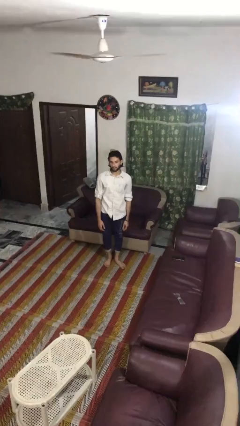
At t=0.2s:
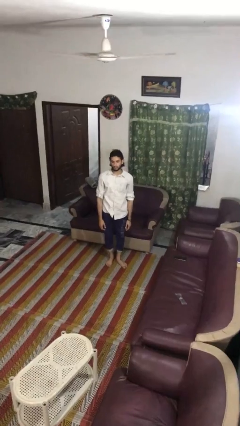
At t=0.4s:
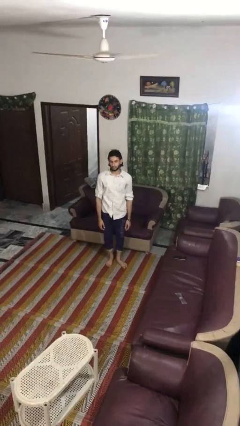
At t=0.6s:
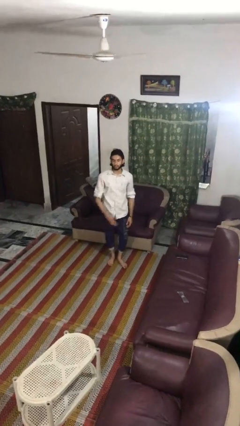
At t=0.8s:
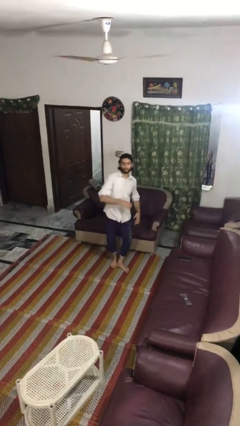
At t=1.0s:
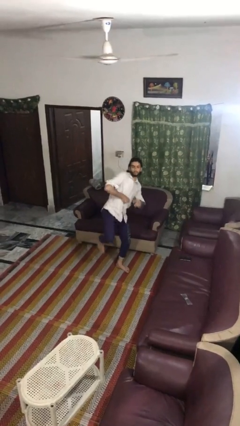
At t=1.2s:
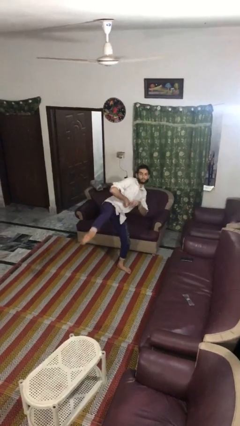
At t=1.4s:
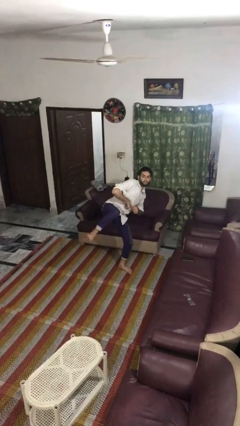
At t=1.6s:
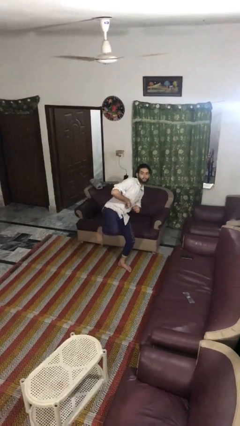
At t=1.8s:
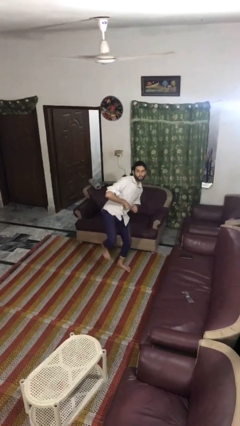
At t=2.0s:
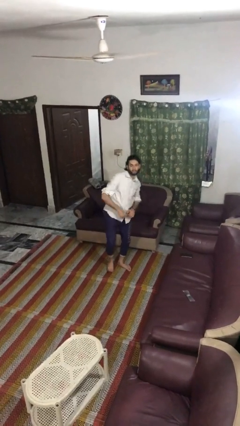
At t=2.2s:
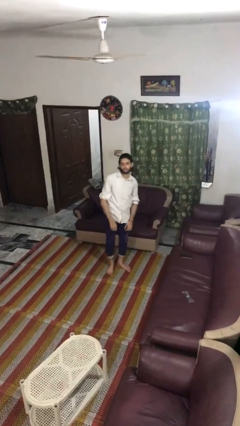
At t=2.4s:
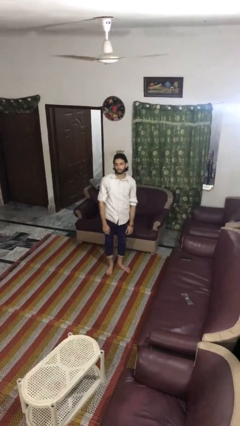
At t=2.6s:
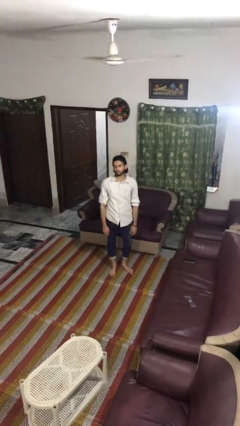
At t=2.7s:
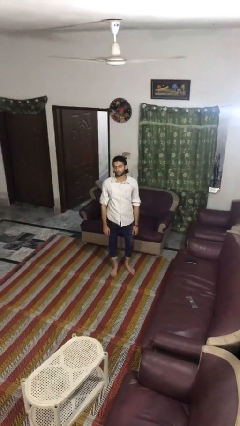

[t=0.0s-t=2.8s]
person karate kicks

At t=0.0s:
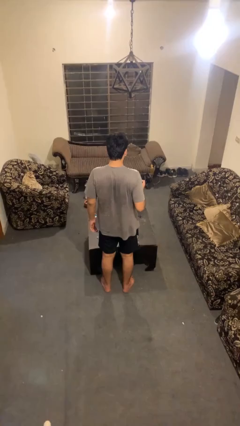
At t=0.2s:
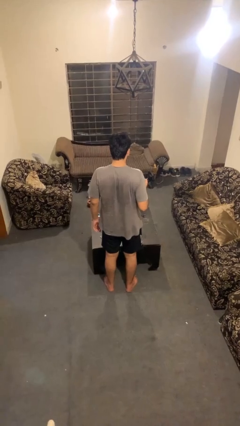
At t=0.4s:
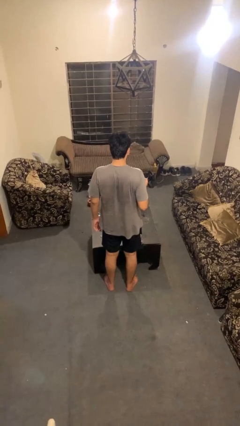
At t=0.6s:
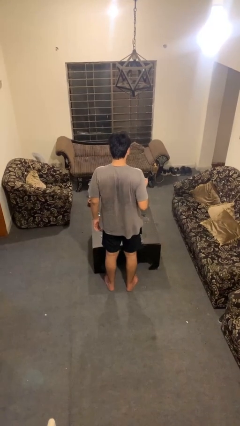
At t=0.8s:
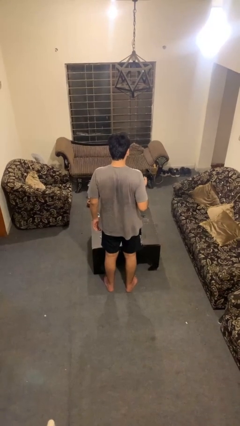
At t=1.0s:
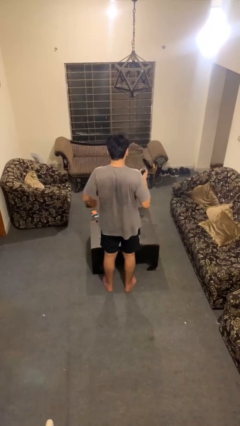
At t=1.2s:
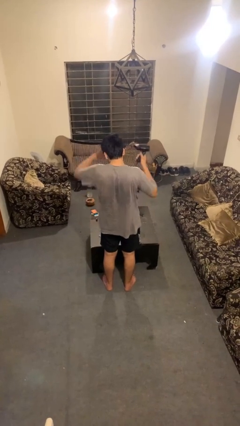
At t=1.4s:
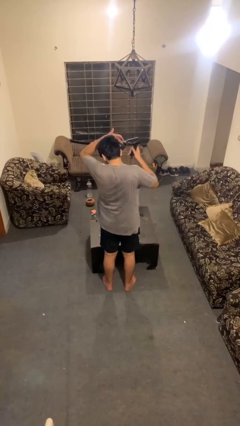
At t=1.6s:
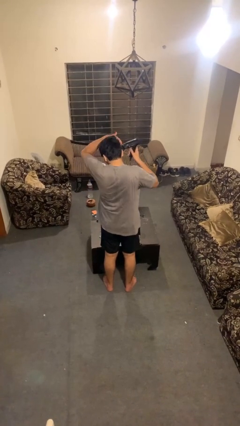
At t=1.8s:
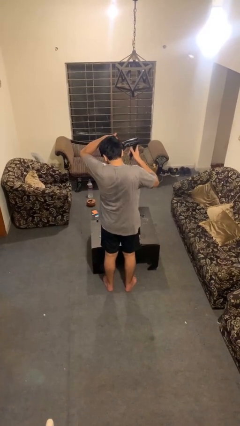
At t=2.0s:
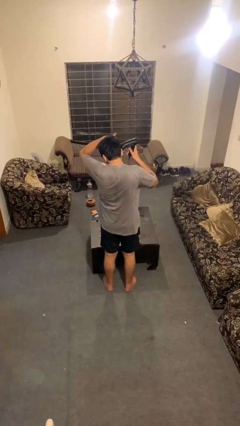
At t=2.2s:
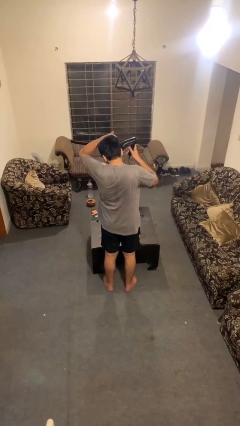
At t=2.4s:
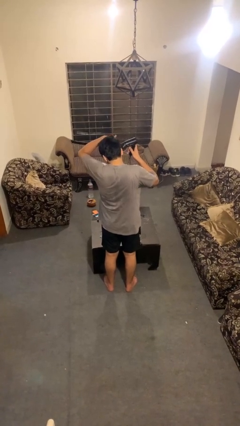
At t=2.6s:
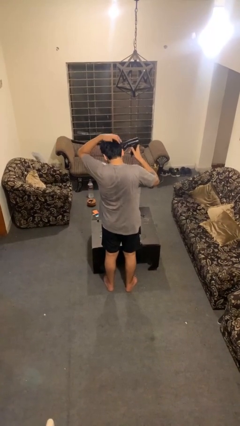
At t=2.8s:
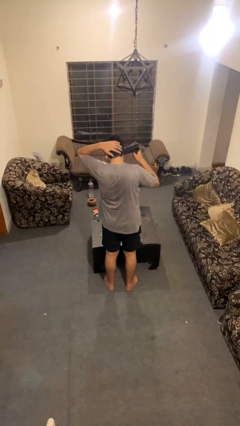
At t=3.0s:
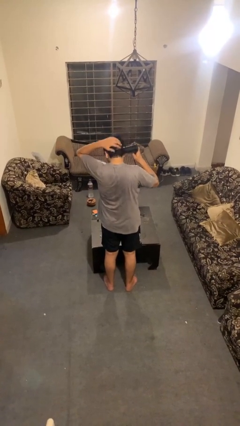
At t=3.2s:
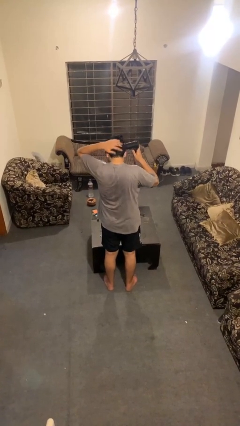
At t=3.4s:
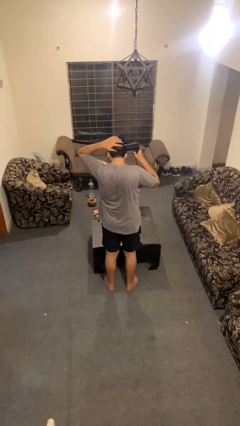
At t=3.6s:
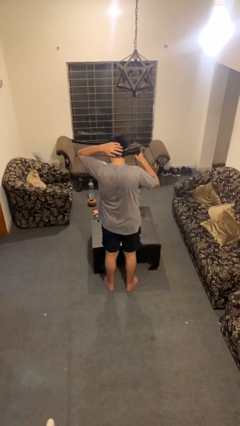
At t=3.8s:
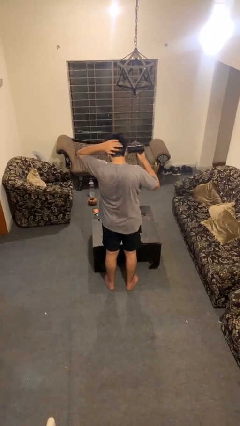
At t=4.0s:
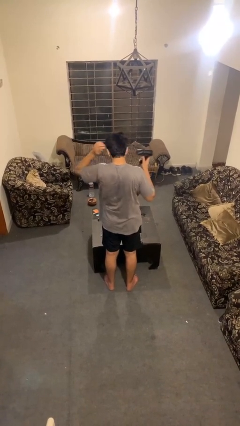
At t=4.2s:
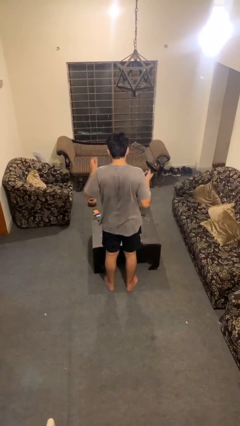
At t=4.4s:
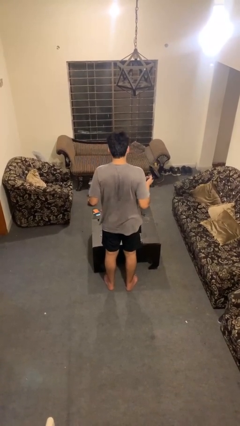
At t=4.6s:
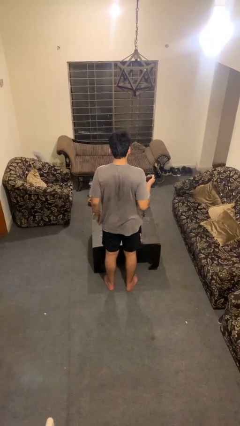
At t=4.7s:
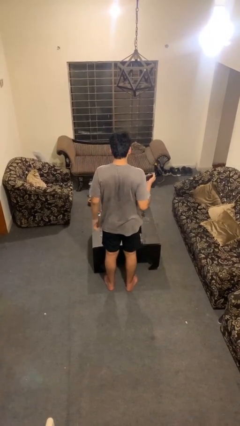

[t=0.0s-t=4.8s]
person dries hair with hairdryer

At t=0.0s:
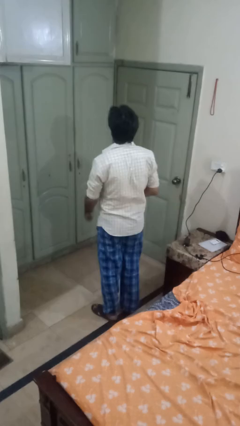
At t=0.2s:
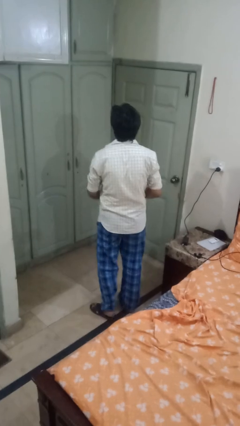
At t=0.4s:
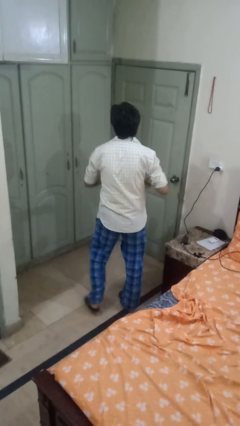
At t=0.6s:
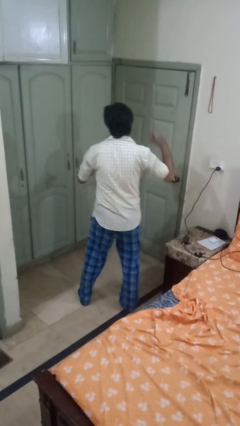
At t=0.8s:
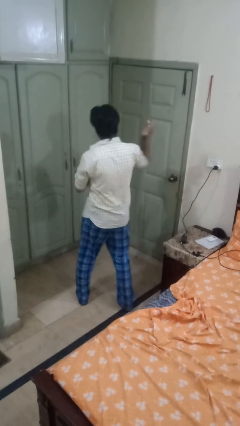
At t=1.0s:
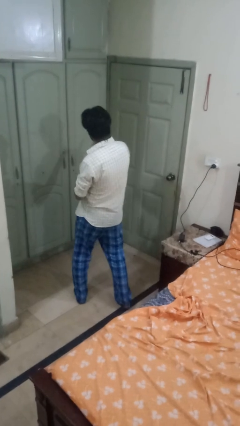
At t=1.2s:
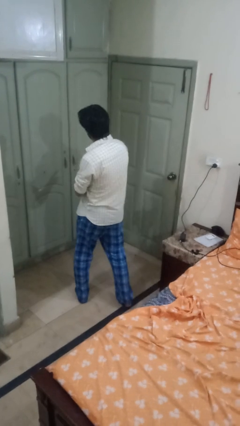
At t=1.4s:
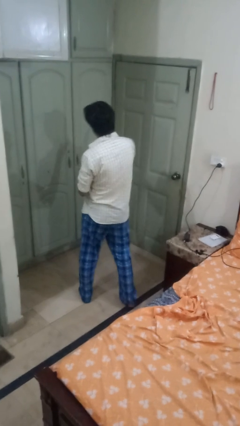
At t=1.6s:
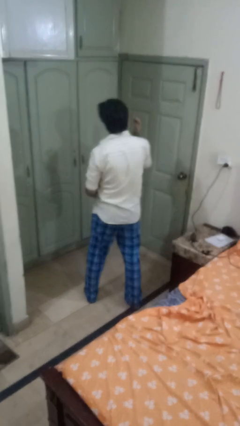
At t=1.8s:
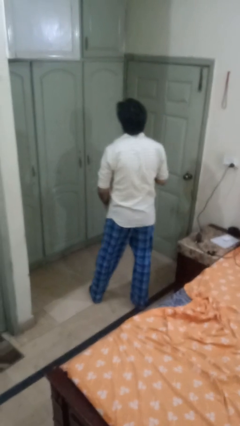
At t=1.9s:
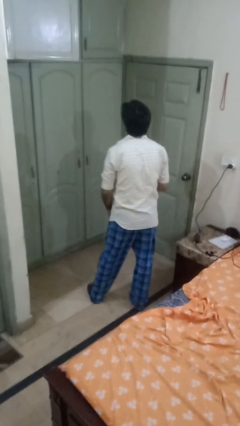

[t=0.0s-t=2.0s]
person karate chop

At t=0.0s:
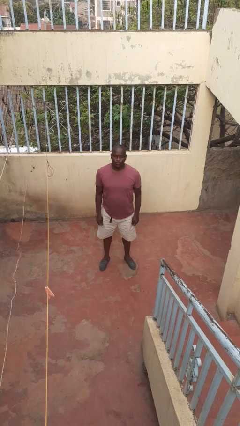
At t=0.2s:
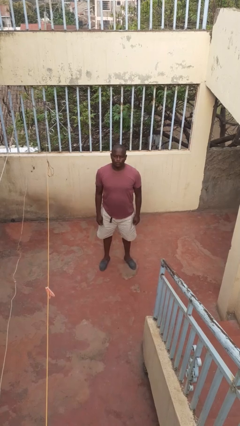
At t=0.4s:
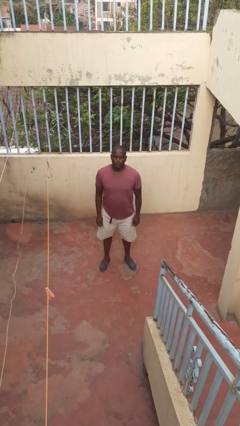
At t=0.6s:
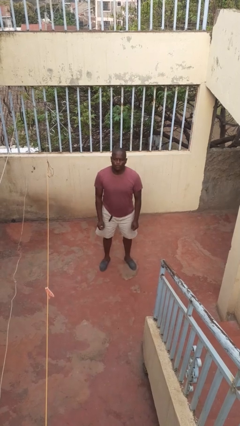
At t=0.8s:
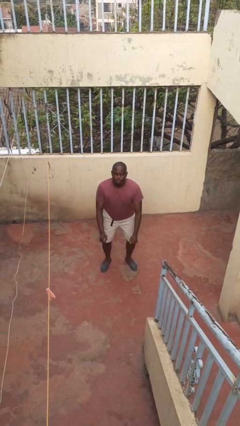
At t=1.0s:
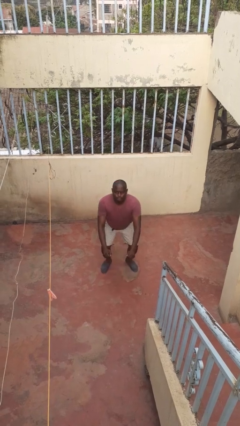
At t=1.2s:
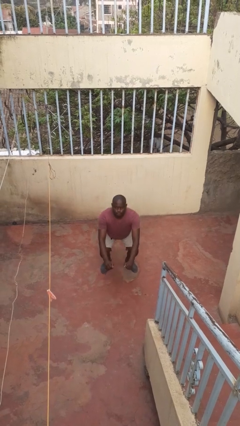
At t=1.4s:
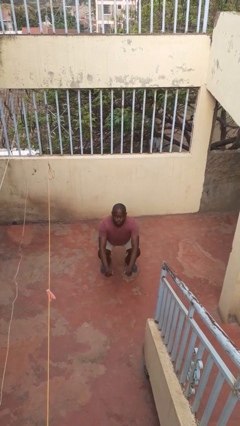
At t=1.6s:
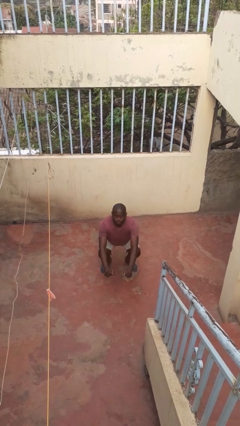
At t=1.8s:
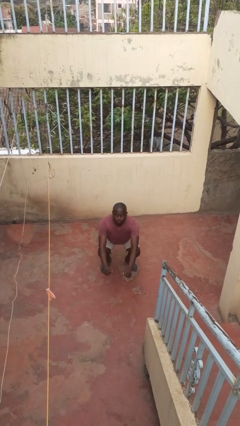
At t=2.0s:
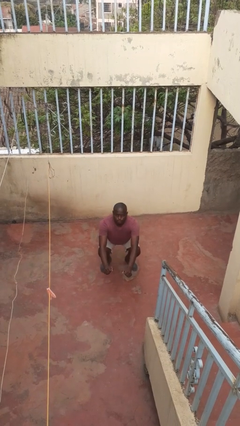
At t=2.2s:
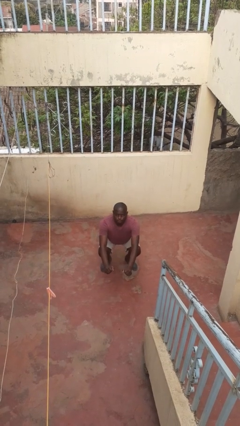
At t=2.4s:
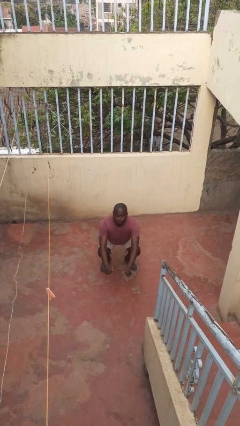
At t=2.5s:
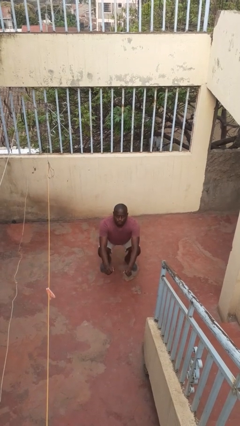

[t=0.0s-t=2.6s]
person squats

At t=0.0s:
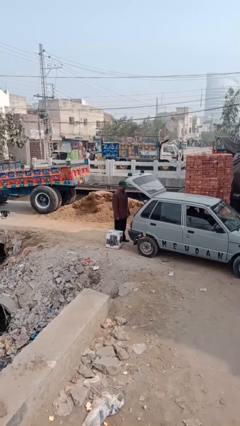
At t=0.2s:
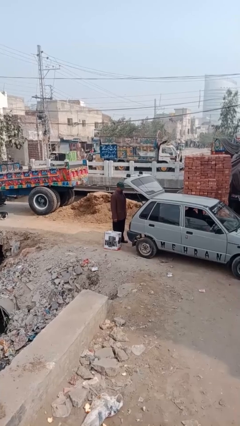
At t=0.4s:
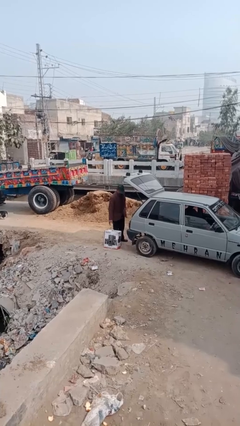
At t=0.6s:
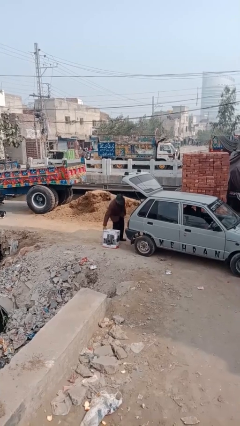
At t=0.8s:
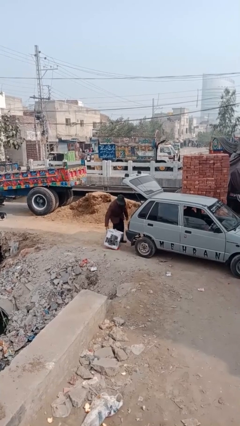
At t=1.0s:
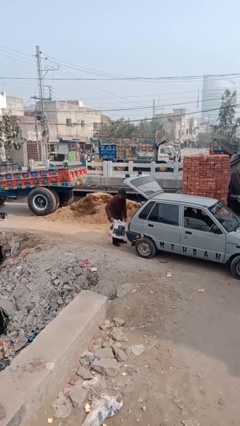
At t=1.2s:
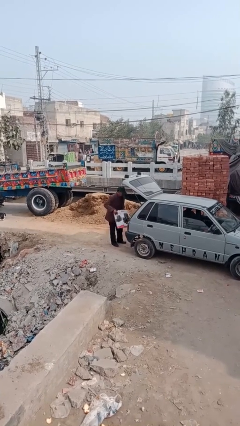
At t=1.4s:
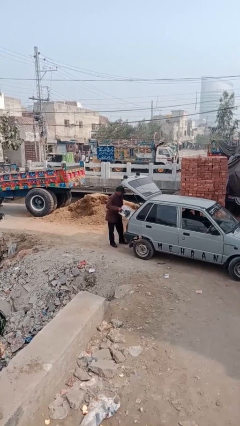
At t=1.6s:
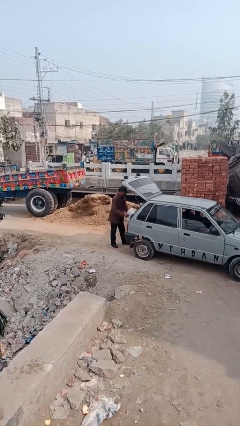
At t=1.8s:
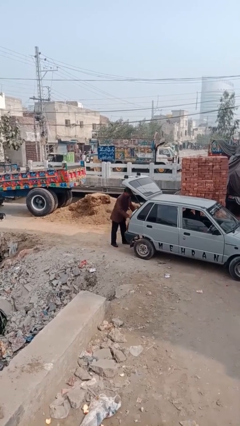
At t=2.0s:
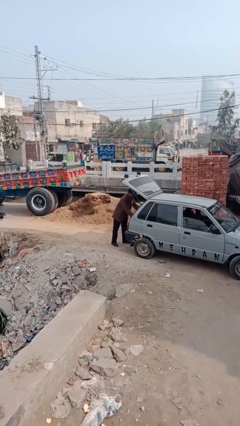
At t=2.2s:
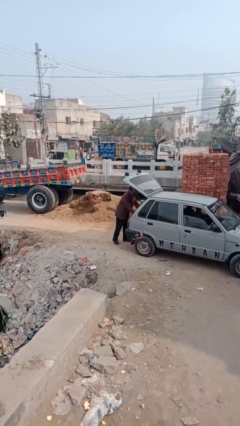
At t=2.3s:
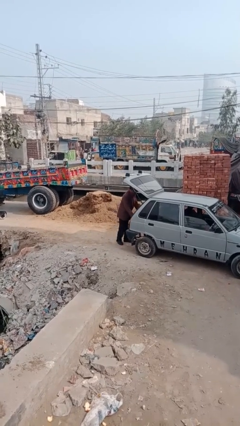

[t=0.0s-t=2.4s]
person loads car

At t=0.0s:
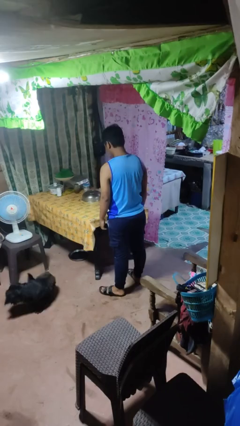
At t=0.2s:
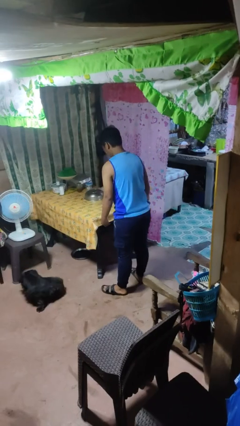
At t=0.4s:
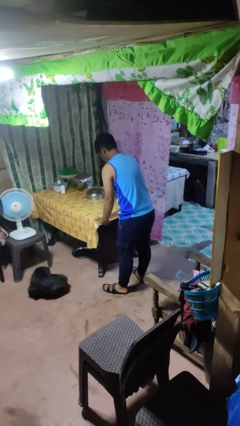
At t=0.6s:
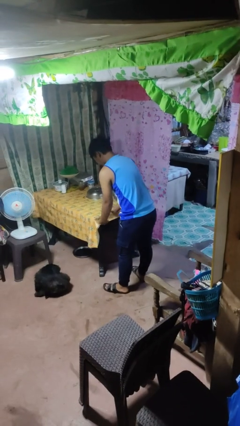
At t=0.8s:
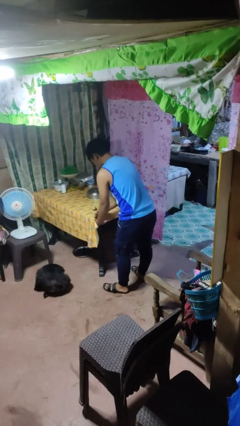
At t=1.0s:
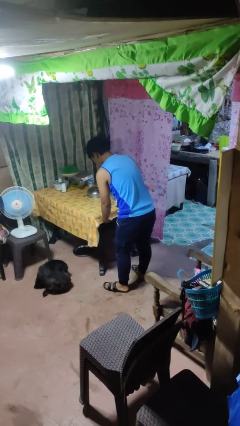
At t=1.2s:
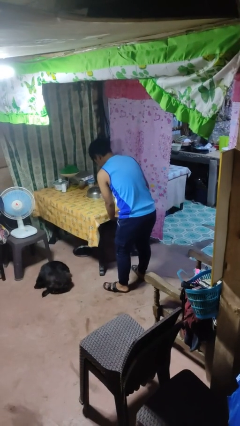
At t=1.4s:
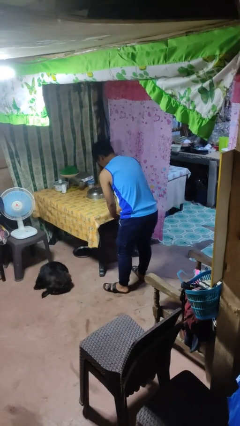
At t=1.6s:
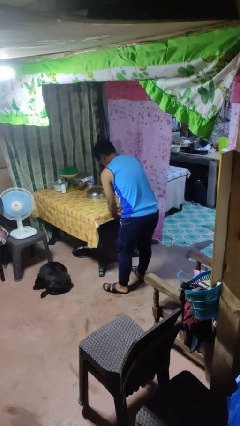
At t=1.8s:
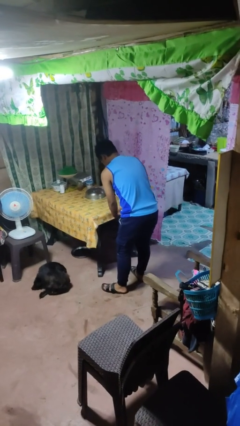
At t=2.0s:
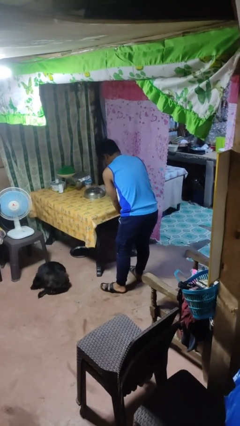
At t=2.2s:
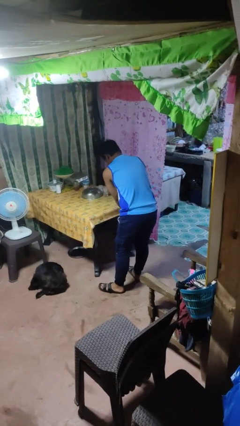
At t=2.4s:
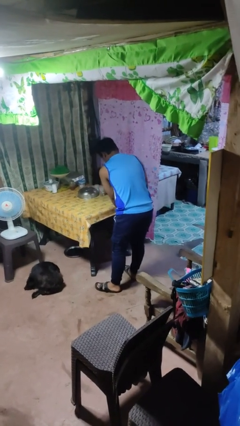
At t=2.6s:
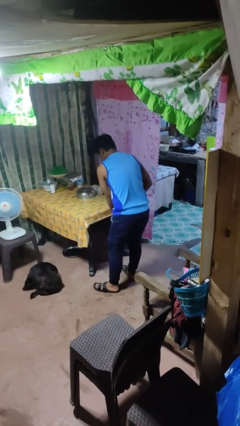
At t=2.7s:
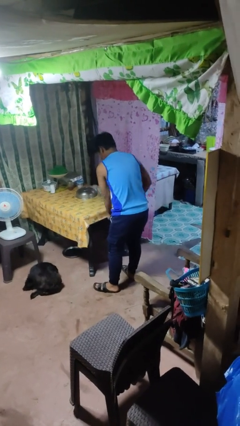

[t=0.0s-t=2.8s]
person cleans table with rag

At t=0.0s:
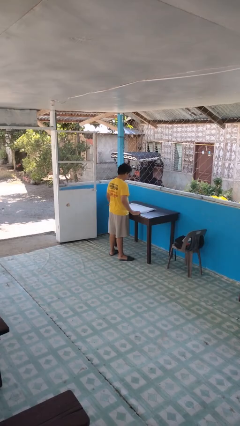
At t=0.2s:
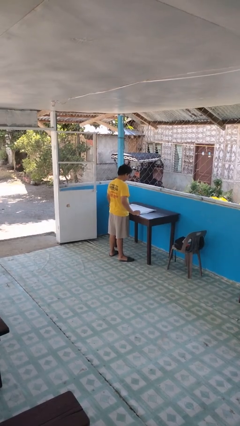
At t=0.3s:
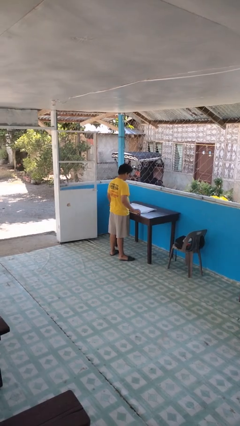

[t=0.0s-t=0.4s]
person unfolds blanket
